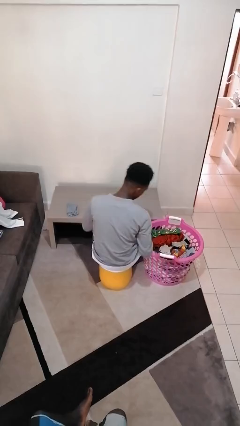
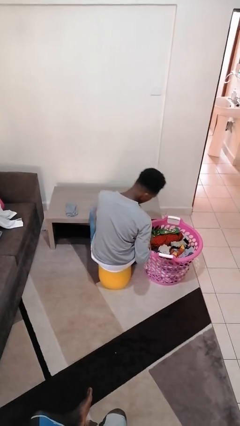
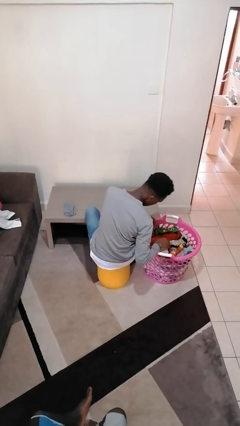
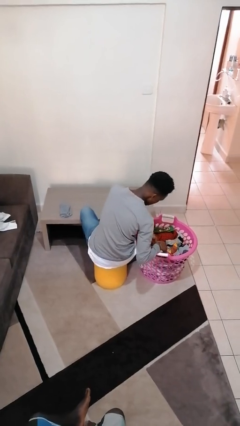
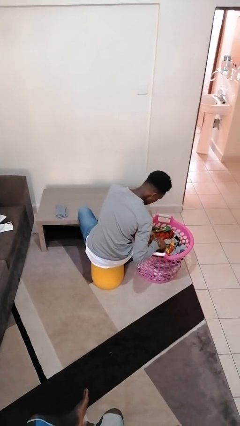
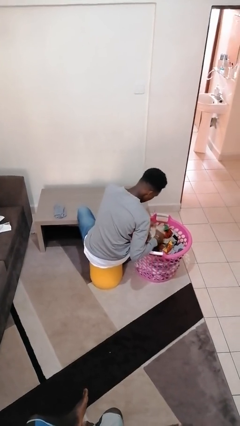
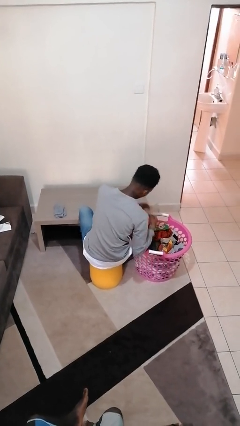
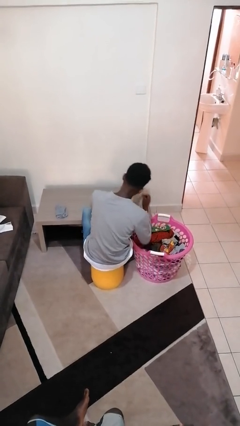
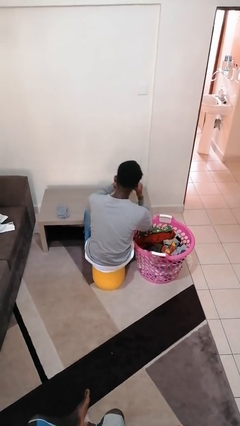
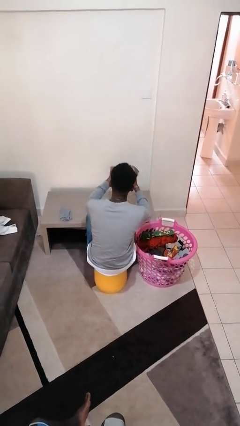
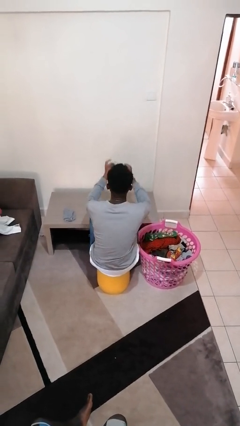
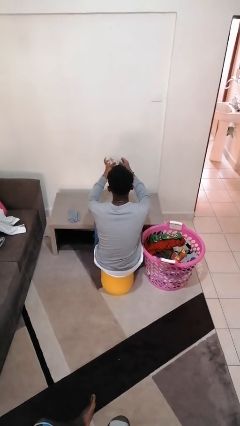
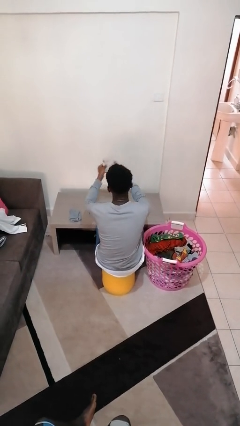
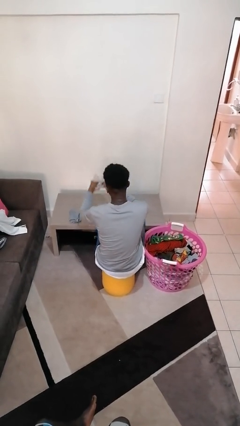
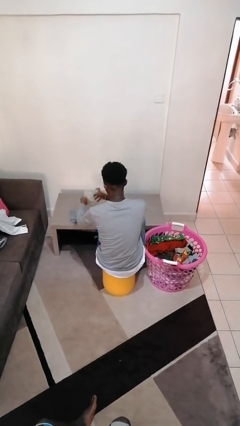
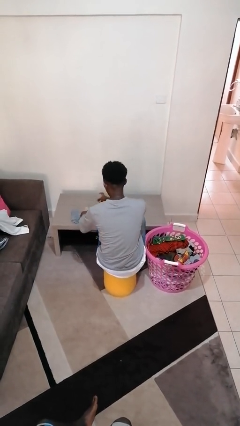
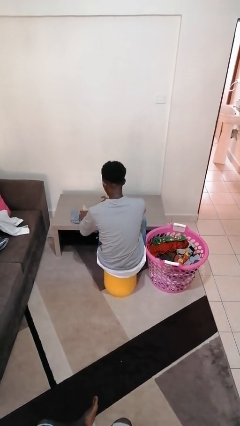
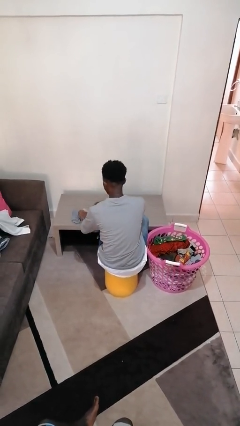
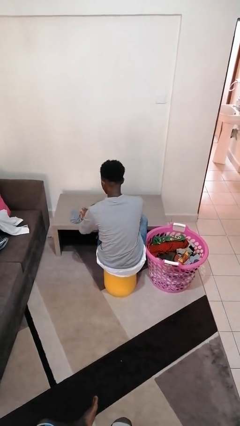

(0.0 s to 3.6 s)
person folds socks

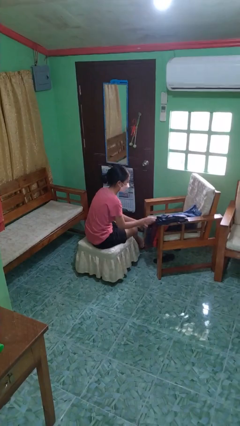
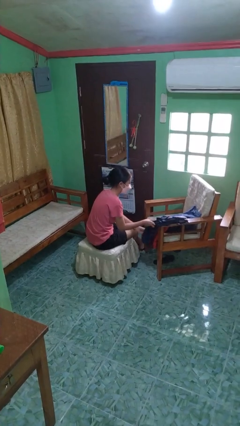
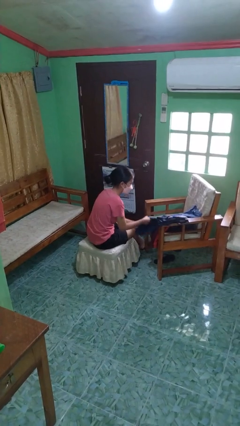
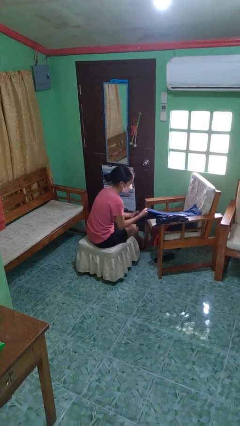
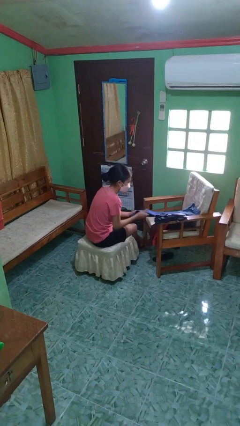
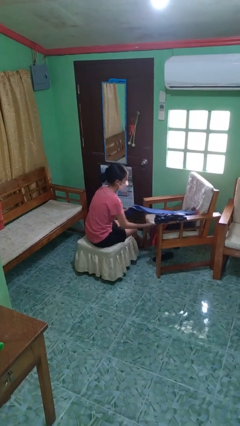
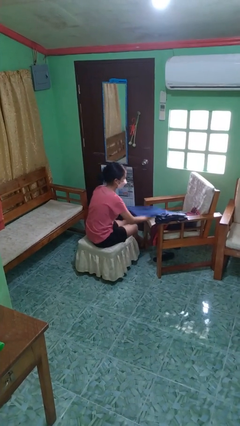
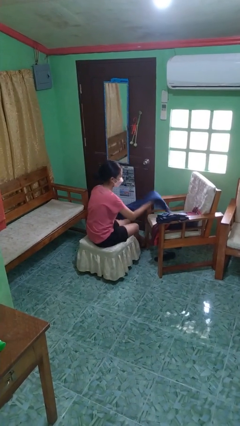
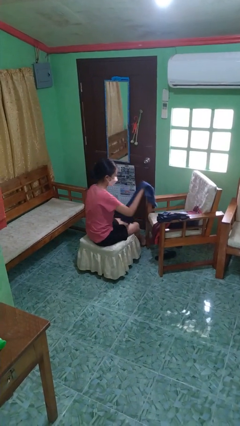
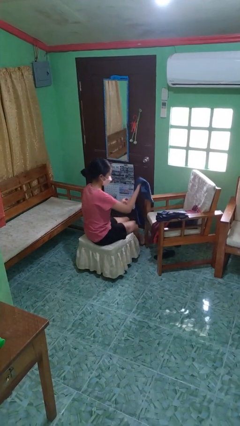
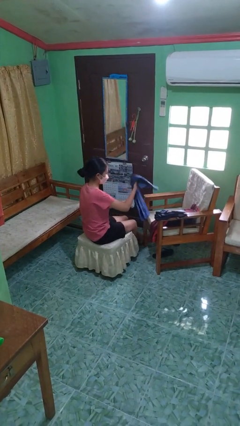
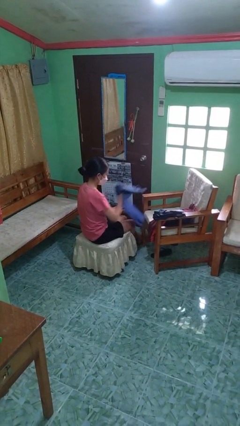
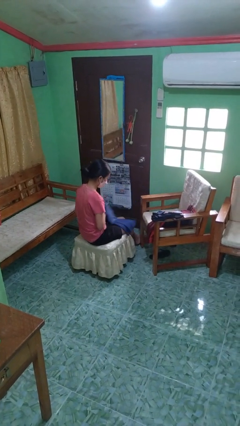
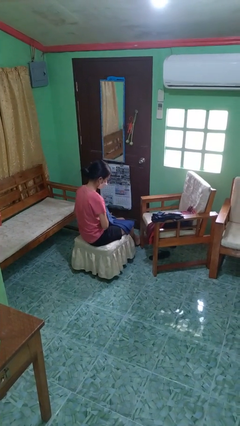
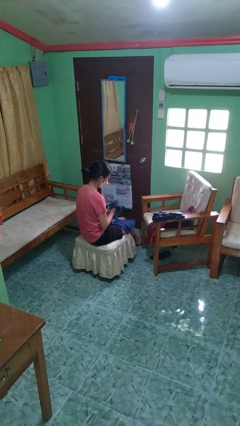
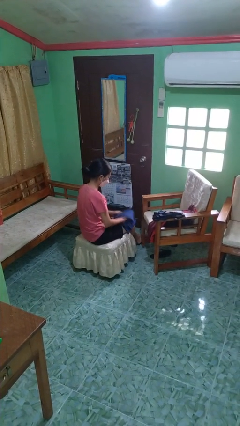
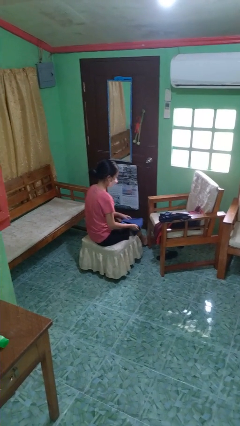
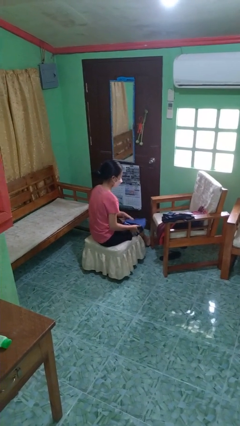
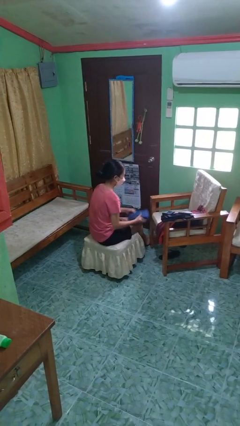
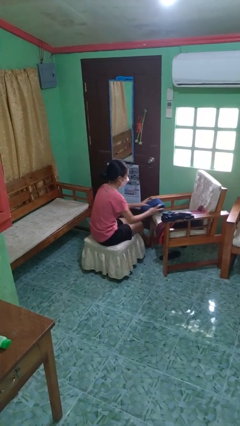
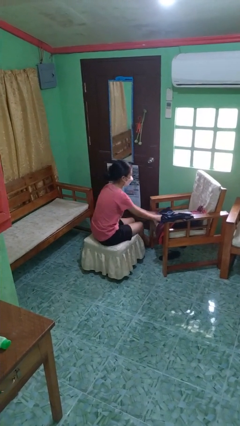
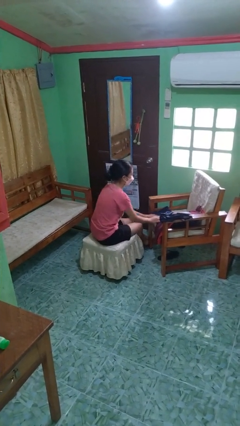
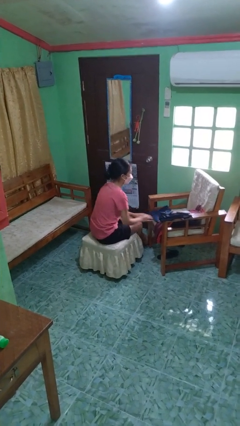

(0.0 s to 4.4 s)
person folds shirt

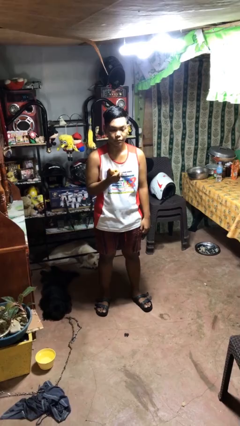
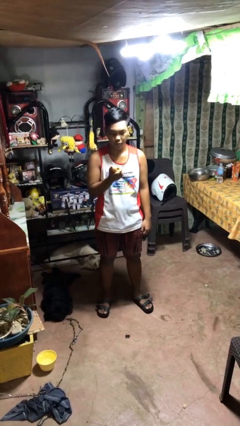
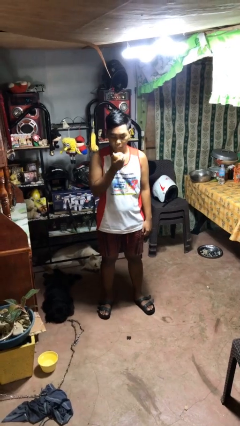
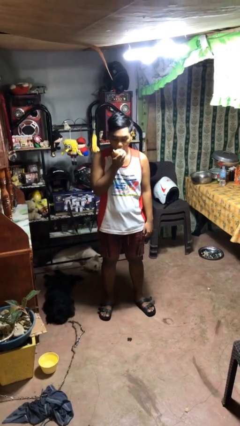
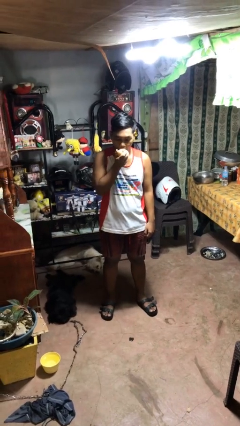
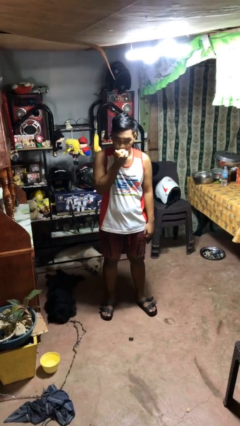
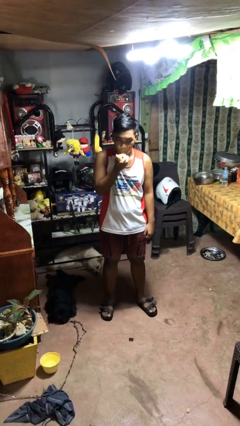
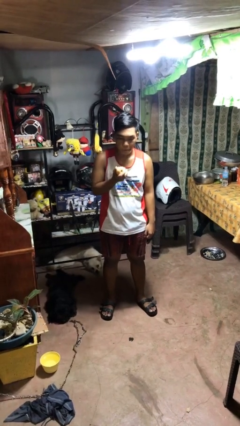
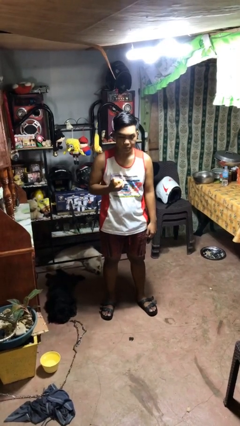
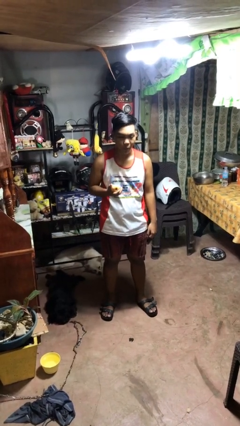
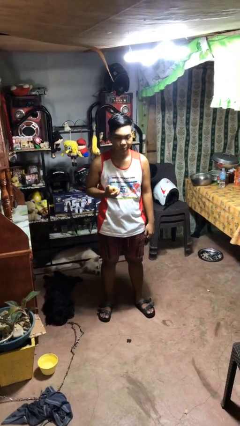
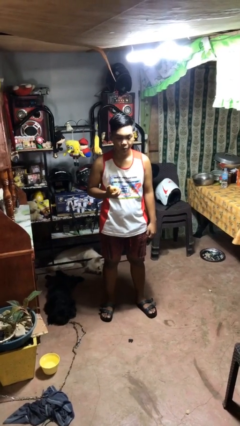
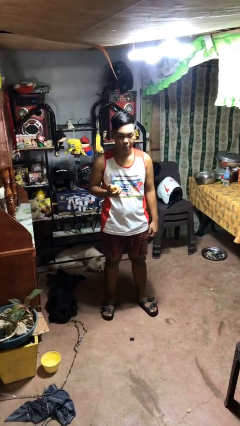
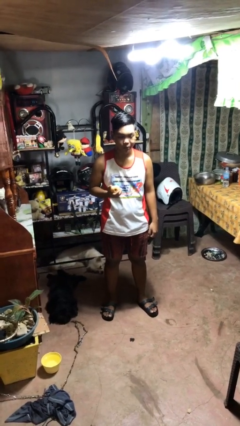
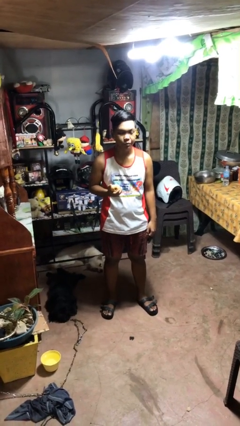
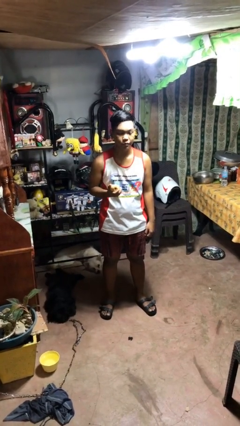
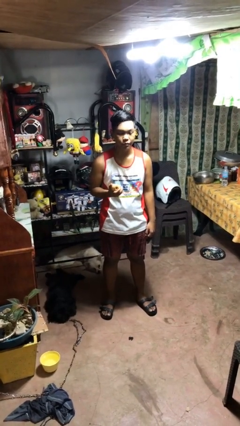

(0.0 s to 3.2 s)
person eats apple

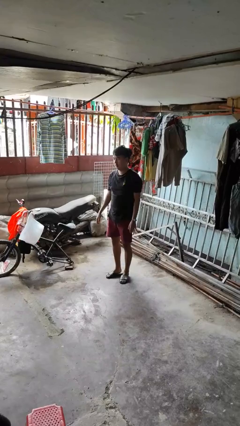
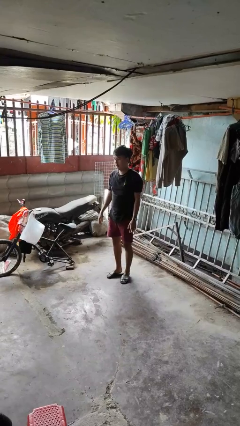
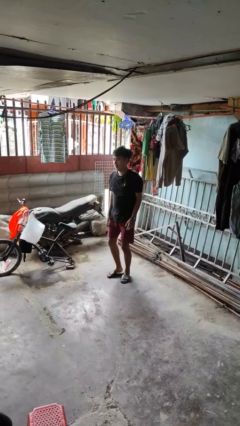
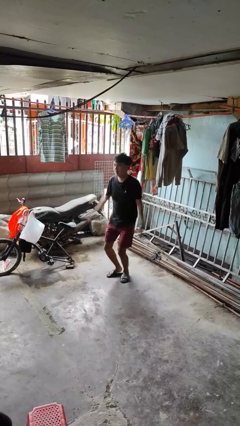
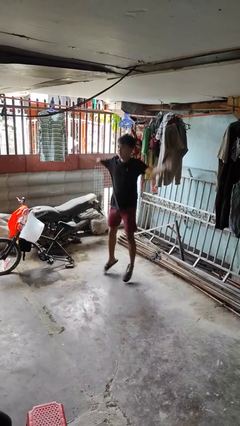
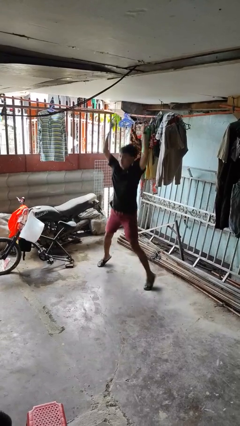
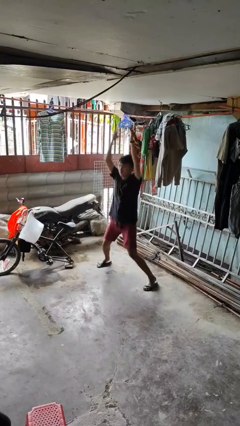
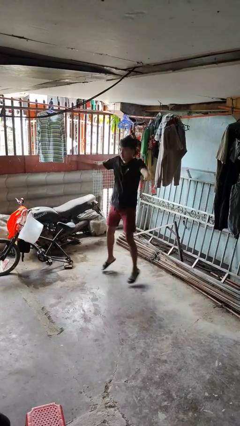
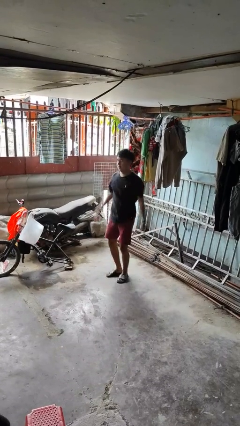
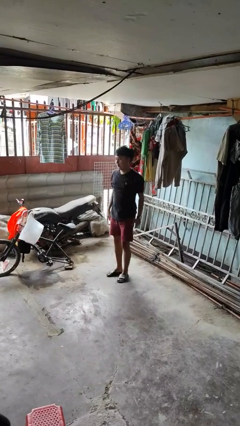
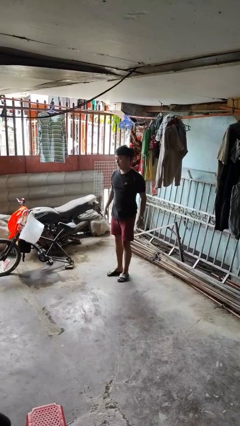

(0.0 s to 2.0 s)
person exercises with jumping jacks

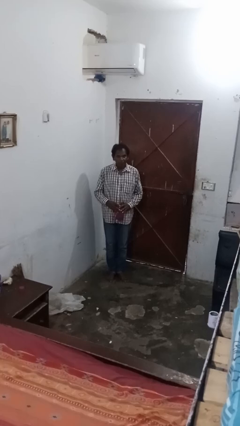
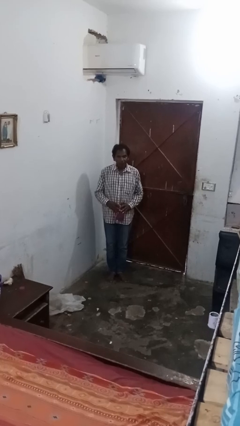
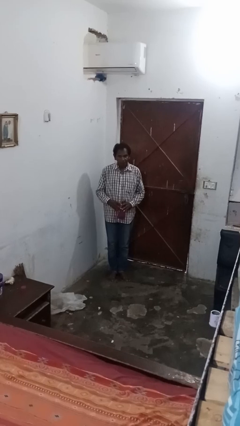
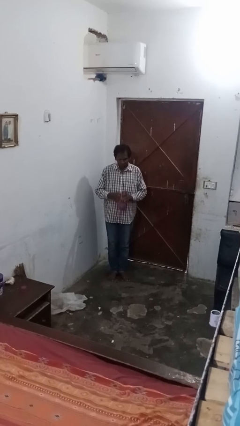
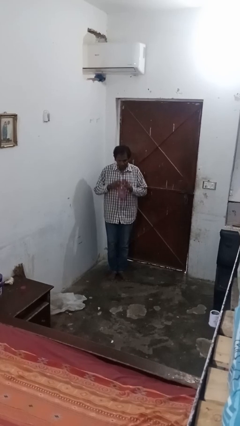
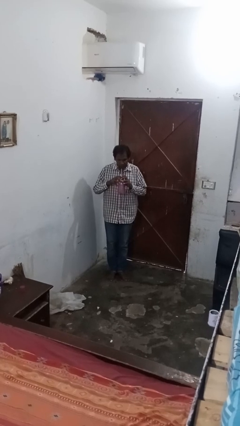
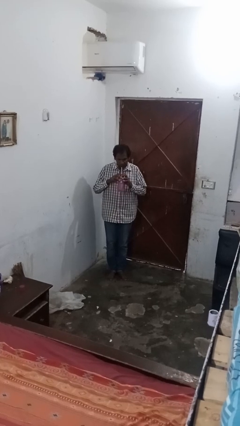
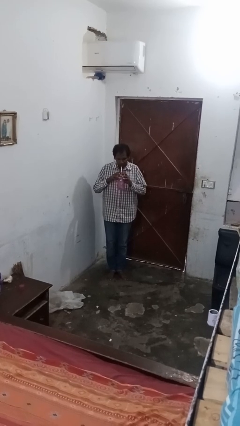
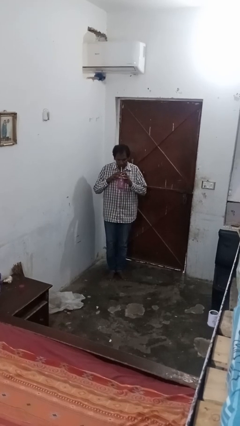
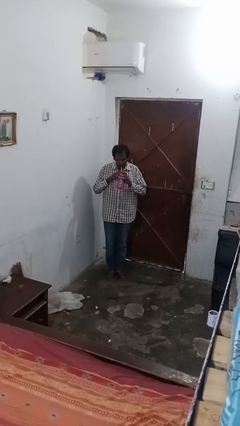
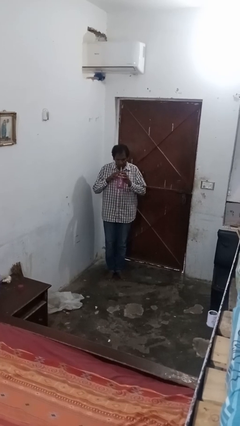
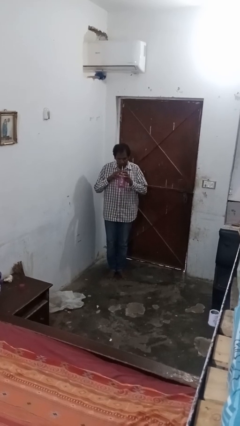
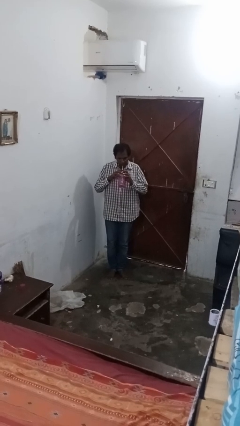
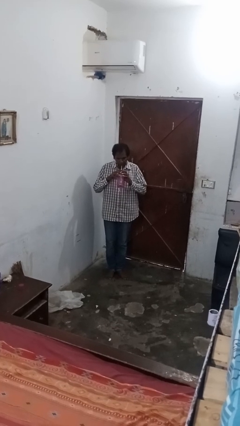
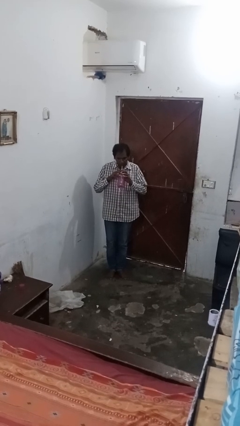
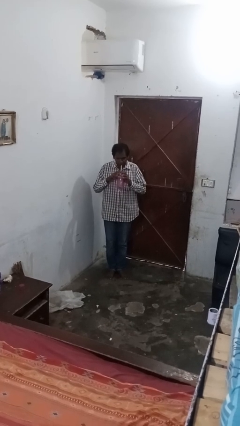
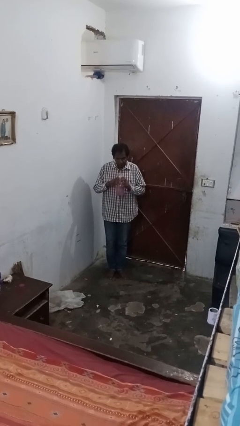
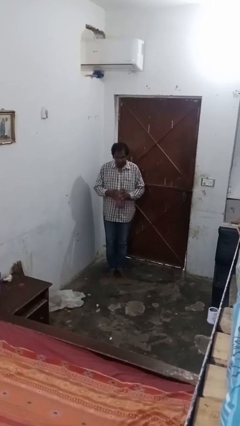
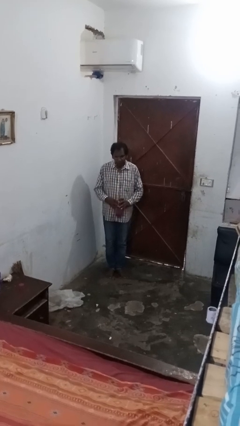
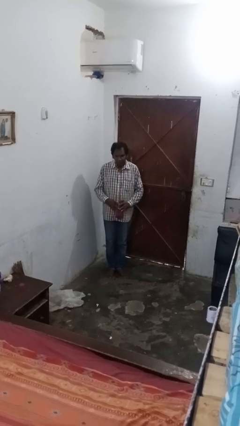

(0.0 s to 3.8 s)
person drinks from straw

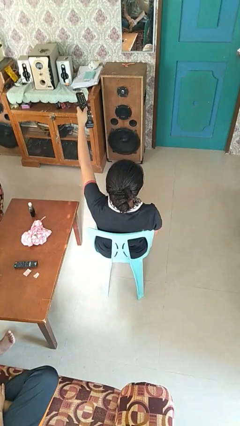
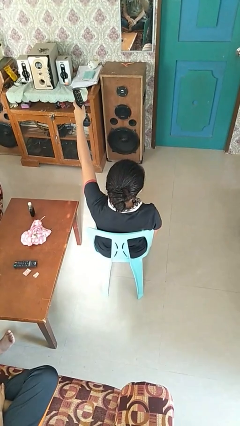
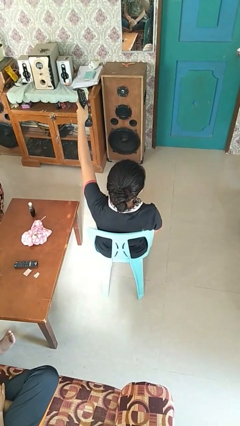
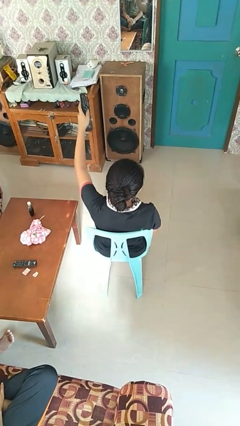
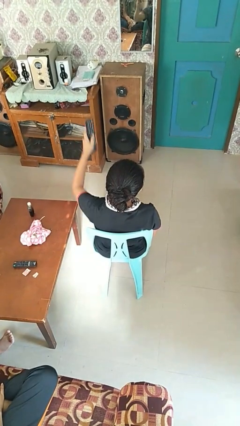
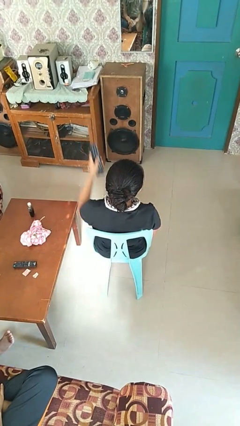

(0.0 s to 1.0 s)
person uses television remote
